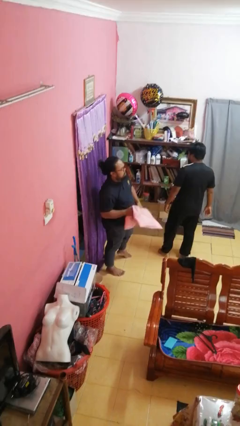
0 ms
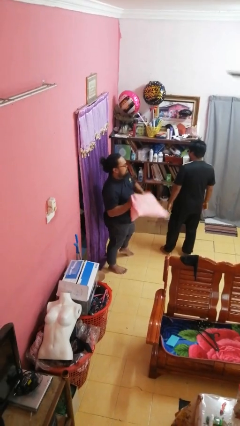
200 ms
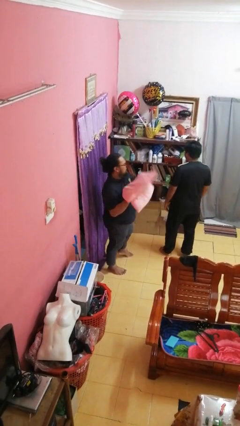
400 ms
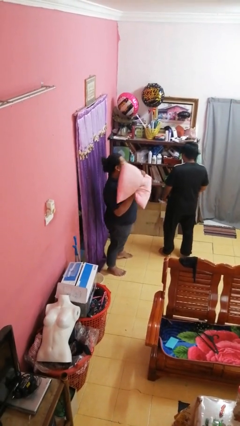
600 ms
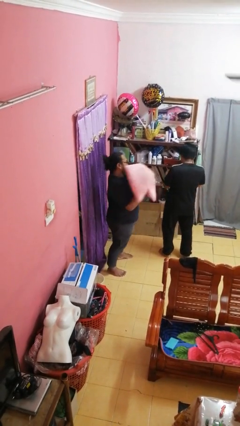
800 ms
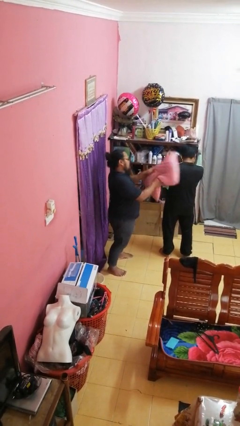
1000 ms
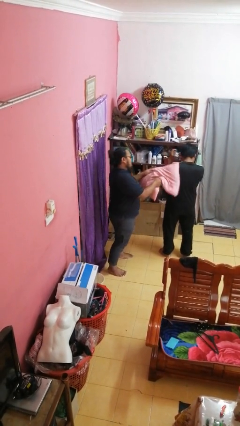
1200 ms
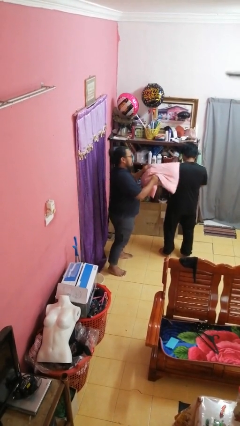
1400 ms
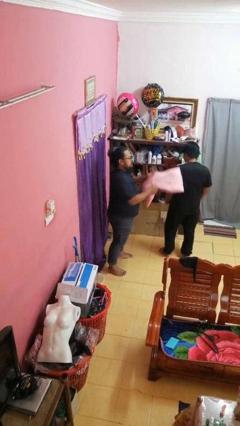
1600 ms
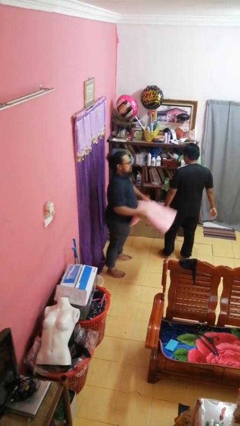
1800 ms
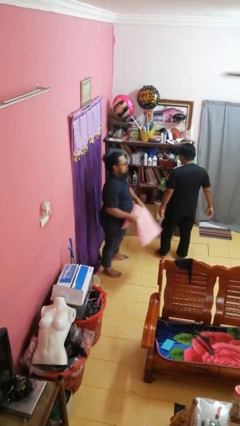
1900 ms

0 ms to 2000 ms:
person hits person with pillow

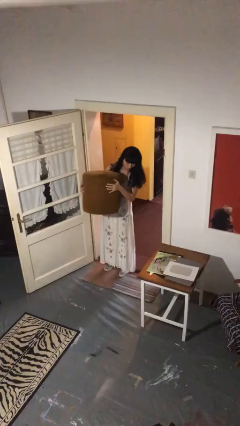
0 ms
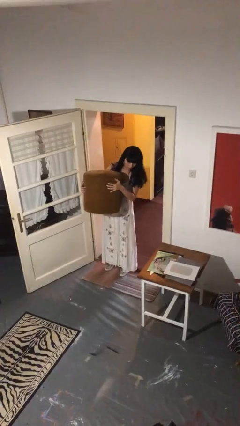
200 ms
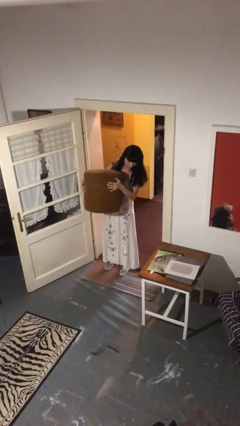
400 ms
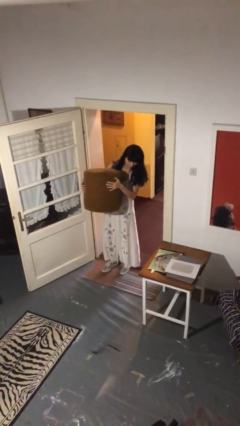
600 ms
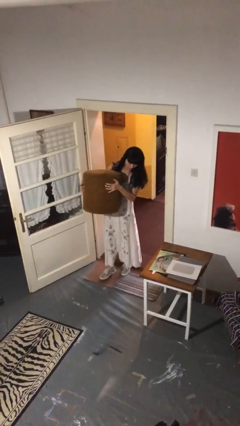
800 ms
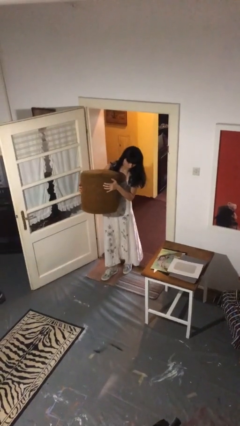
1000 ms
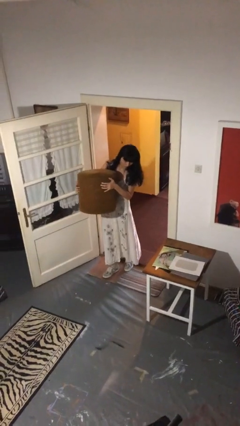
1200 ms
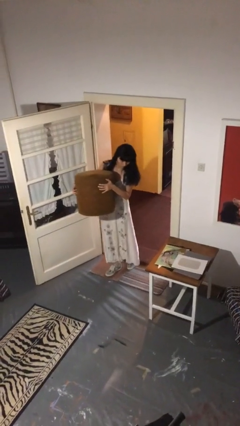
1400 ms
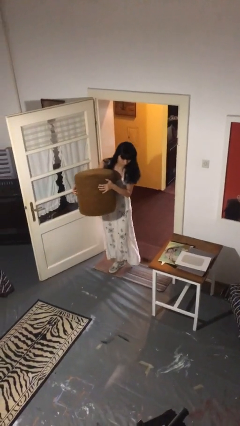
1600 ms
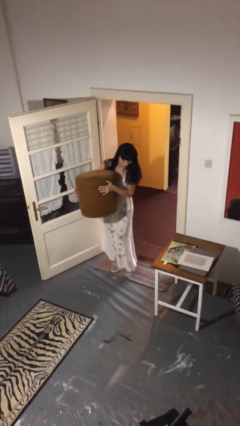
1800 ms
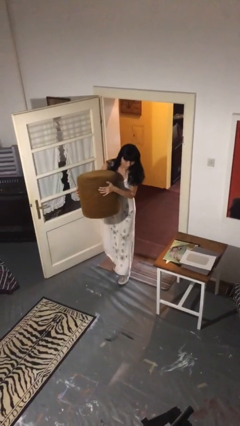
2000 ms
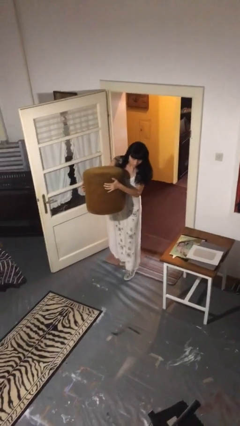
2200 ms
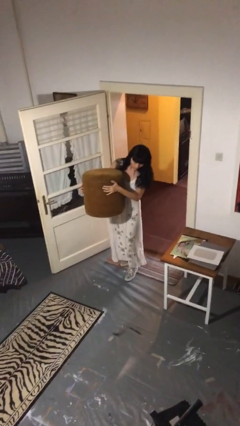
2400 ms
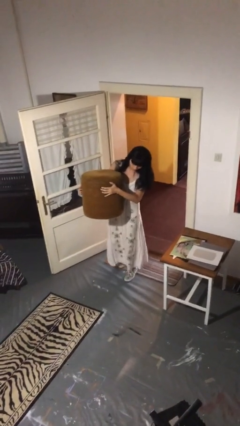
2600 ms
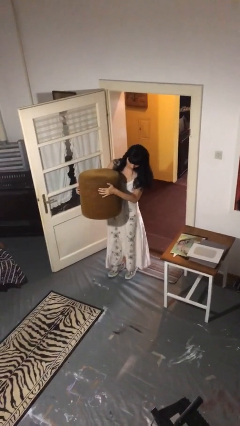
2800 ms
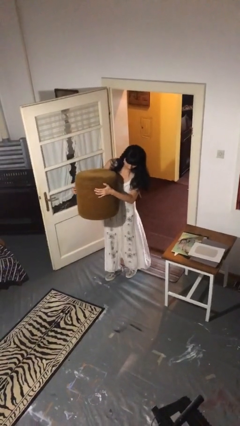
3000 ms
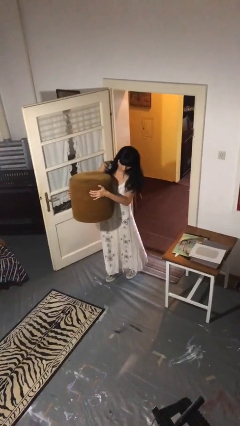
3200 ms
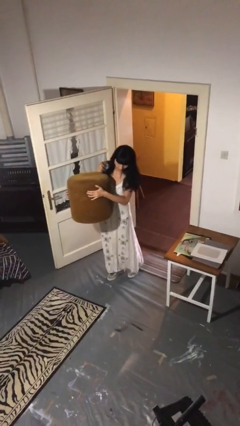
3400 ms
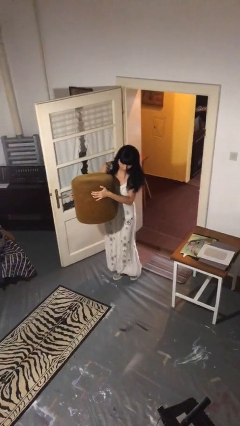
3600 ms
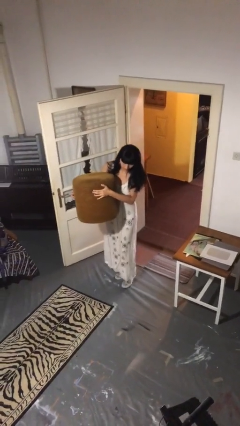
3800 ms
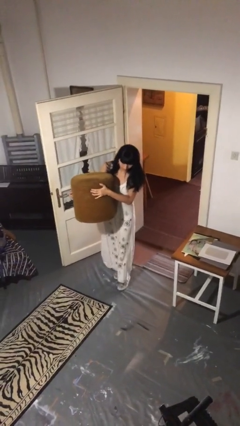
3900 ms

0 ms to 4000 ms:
person carries heavy object

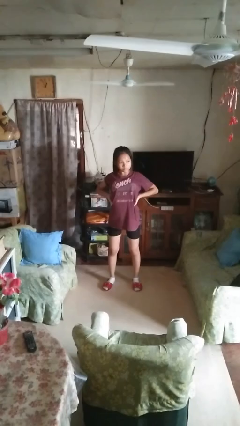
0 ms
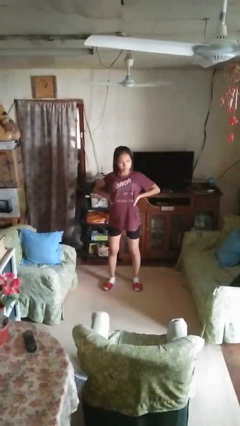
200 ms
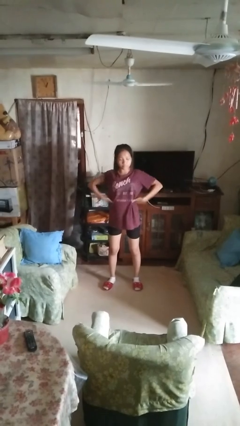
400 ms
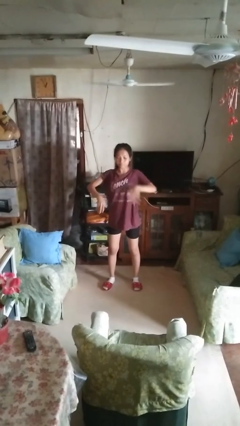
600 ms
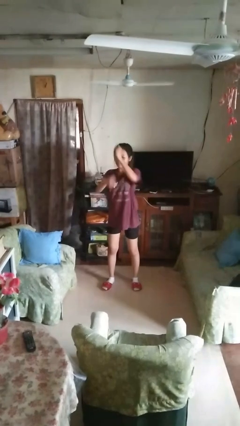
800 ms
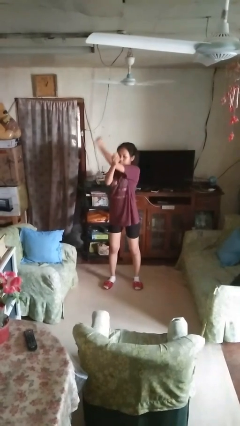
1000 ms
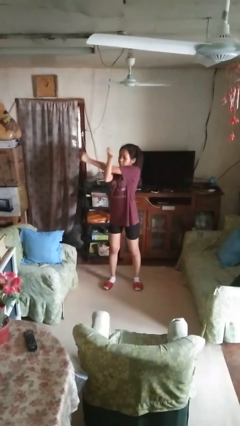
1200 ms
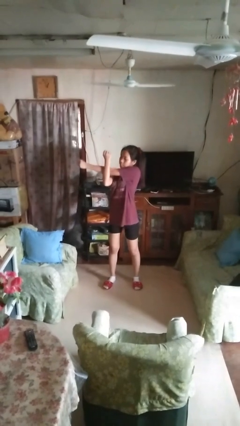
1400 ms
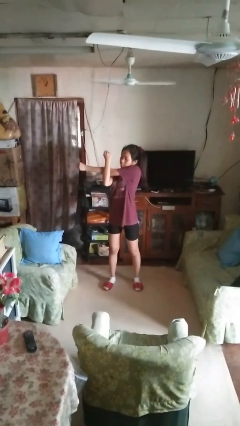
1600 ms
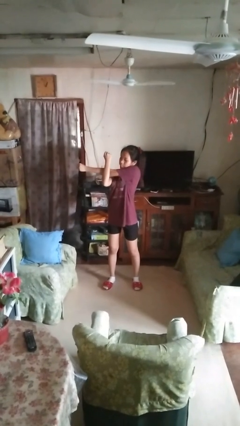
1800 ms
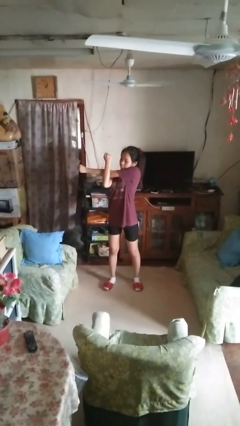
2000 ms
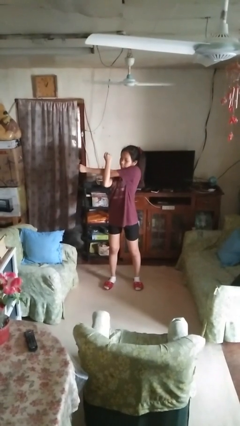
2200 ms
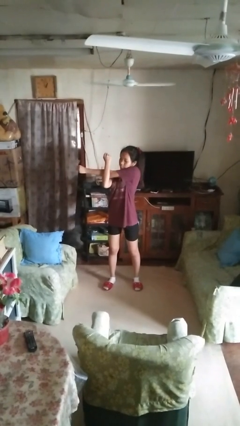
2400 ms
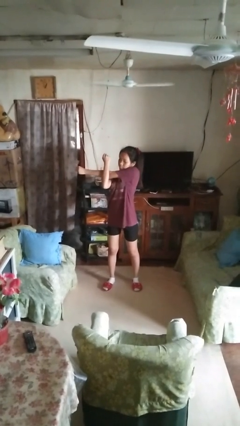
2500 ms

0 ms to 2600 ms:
person stretches arms to side

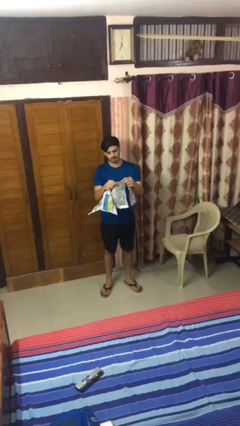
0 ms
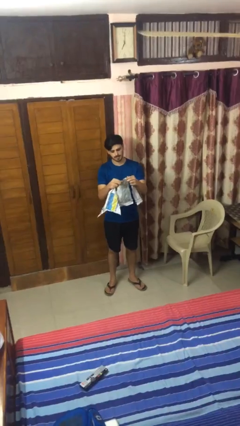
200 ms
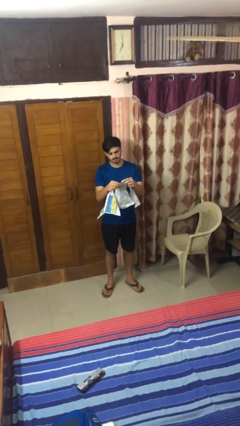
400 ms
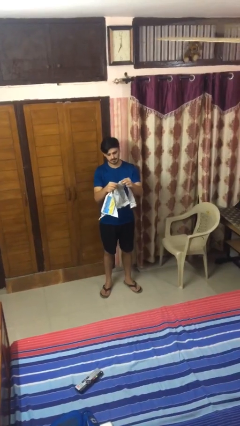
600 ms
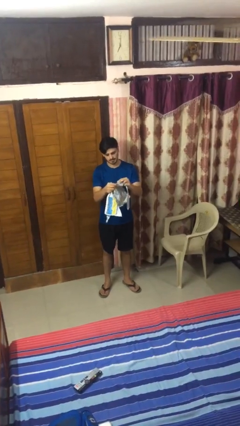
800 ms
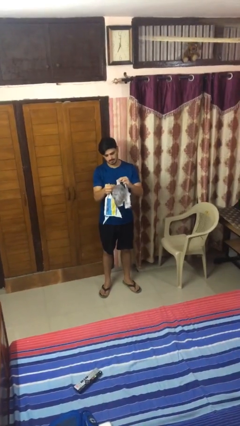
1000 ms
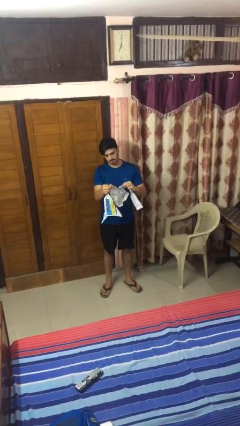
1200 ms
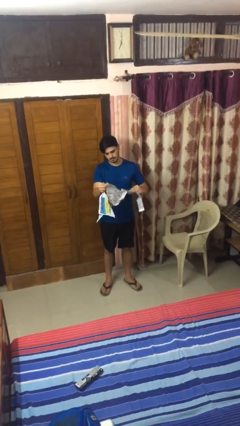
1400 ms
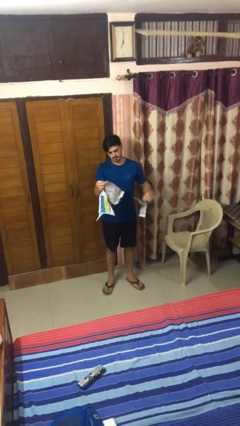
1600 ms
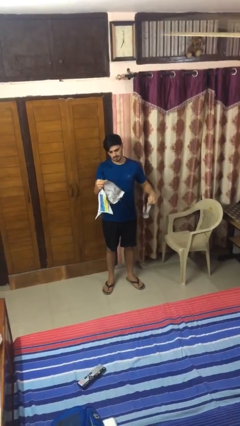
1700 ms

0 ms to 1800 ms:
person tears paper

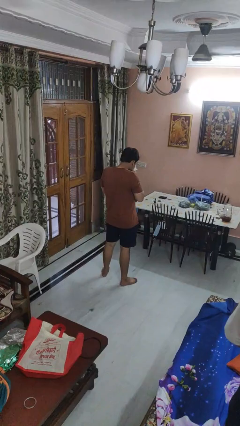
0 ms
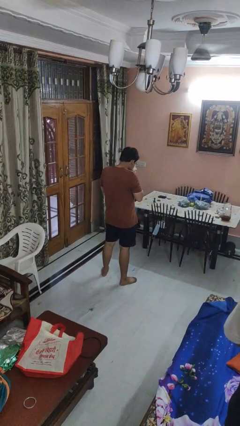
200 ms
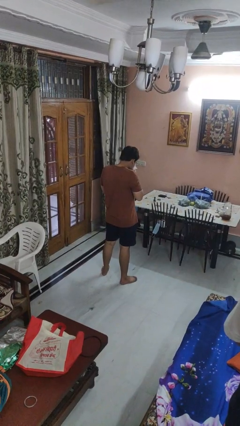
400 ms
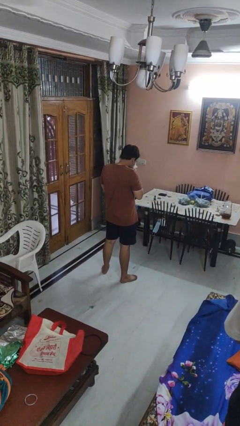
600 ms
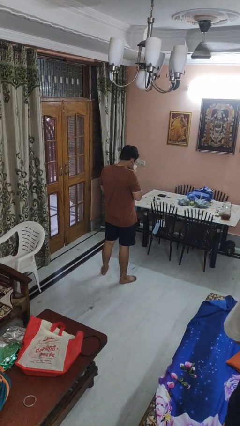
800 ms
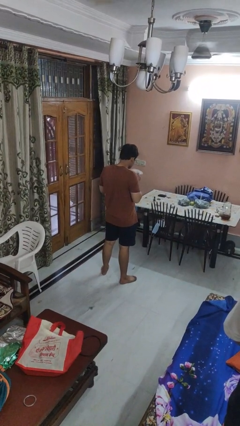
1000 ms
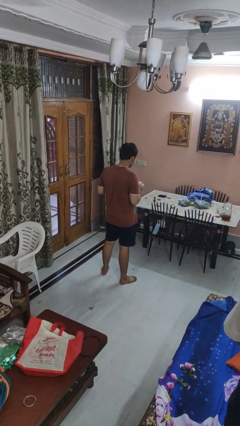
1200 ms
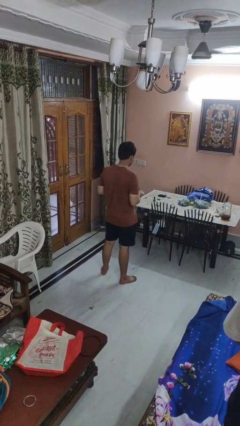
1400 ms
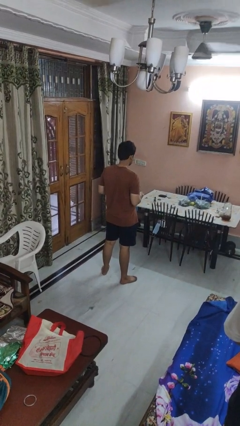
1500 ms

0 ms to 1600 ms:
person blows nose

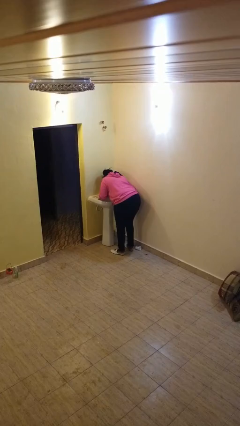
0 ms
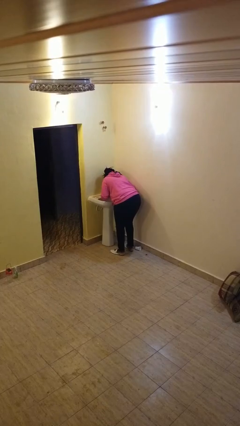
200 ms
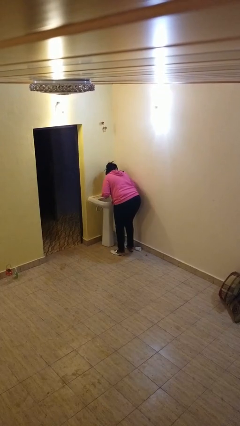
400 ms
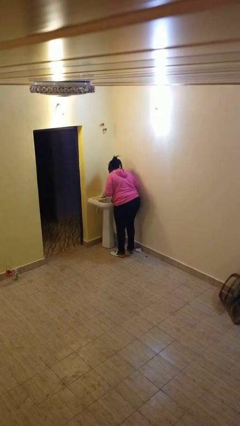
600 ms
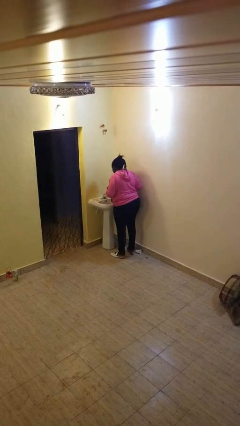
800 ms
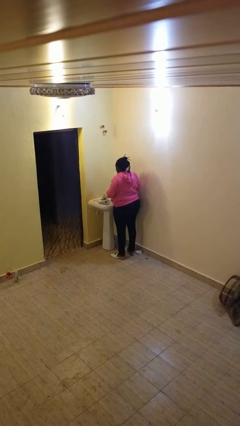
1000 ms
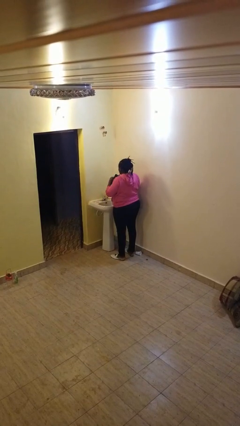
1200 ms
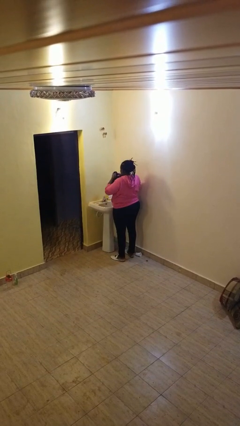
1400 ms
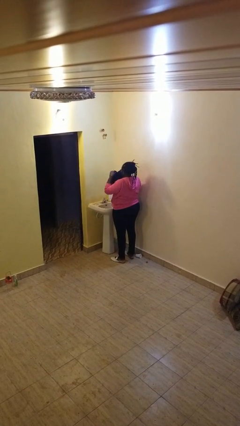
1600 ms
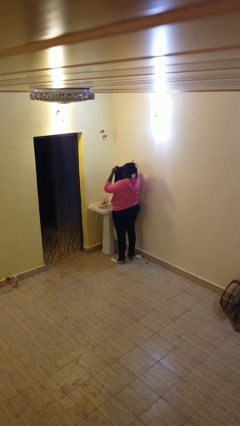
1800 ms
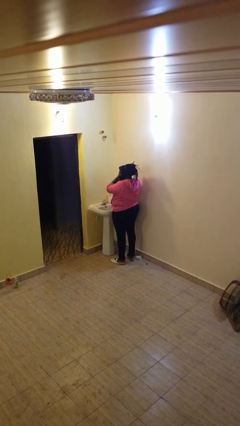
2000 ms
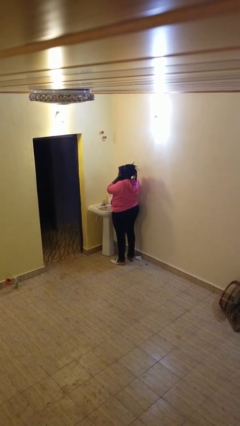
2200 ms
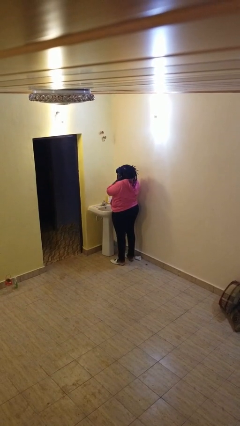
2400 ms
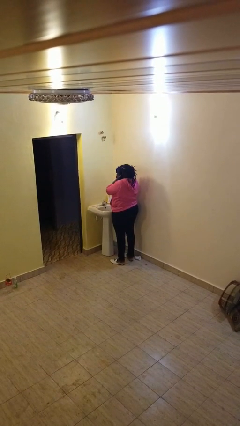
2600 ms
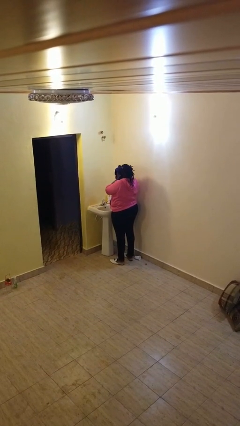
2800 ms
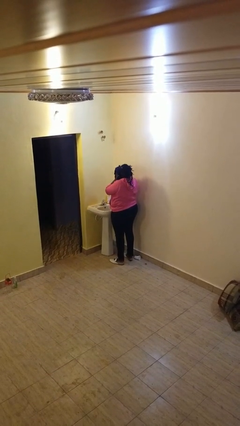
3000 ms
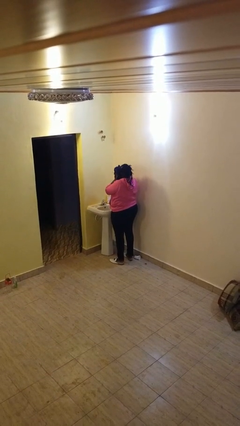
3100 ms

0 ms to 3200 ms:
person dries face with towel

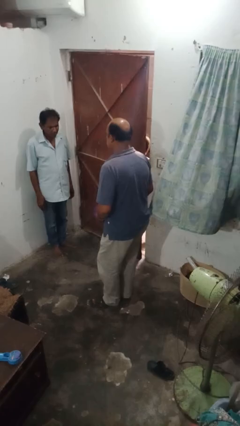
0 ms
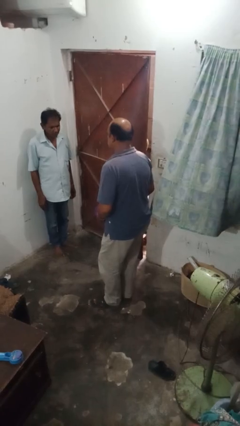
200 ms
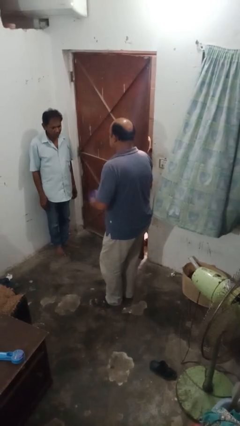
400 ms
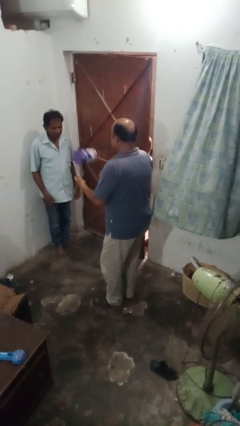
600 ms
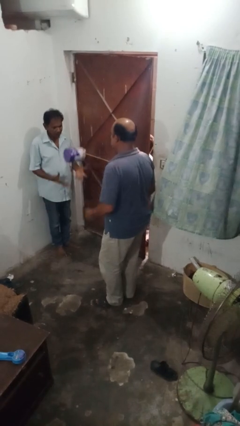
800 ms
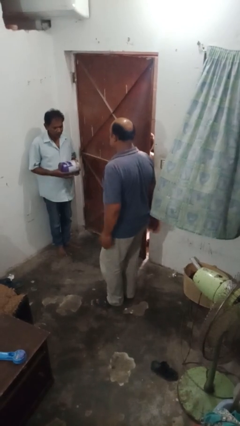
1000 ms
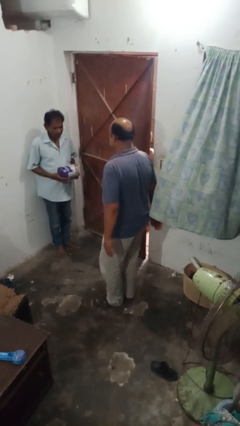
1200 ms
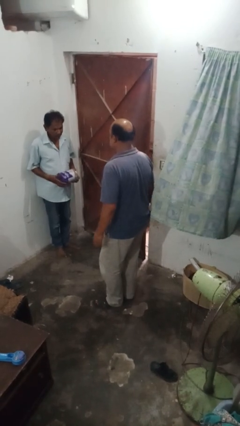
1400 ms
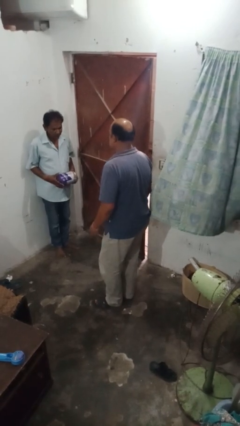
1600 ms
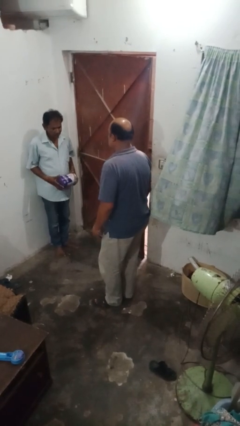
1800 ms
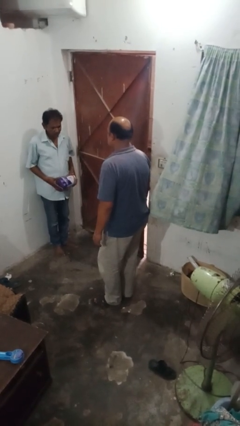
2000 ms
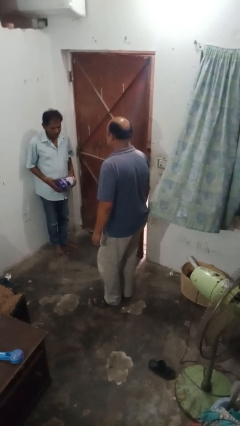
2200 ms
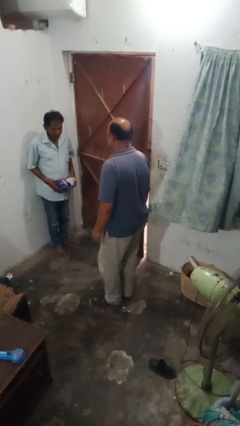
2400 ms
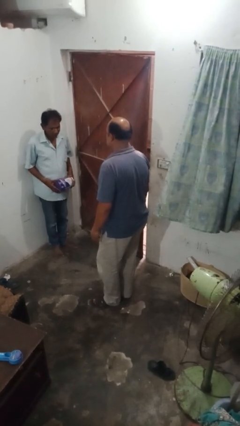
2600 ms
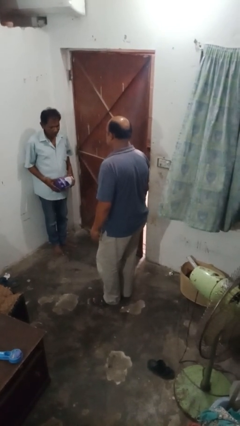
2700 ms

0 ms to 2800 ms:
person throws object to person
